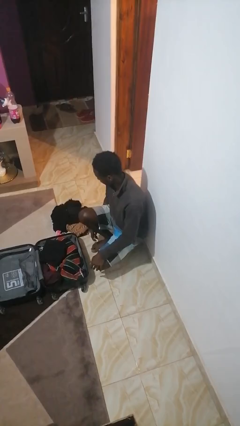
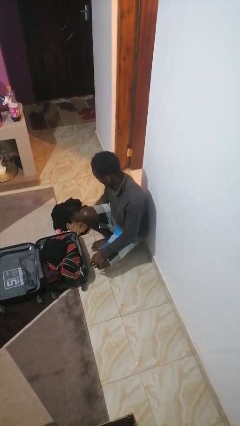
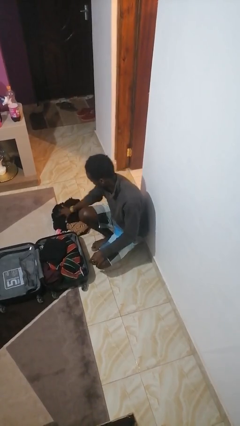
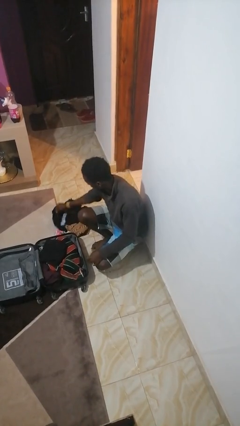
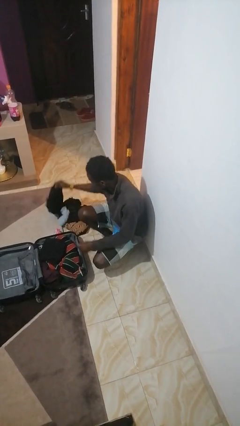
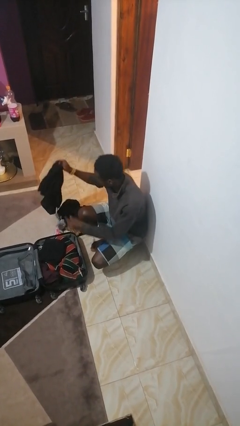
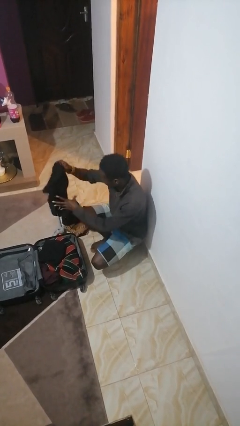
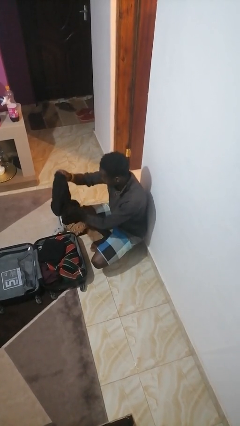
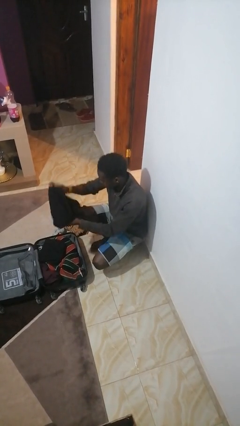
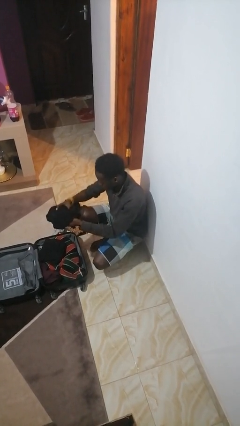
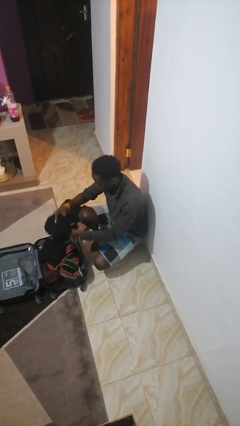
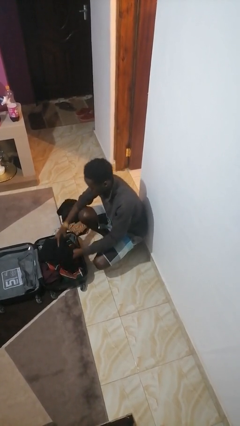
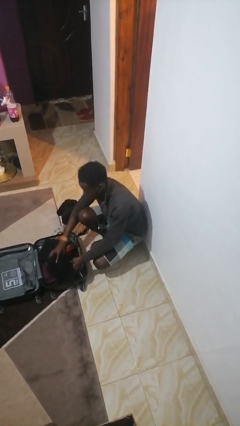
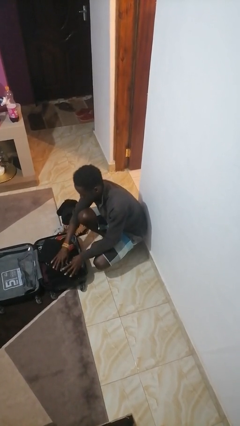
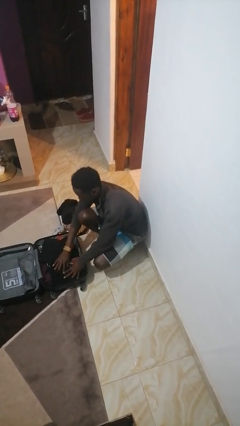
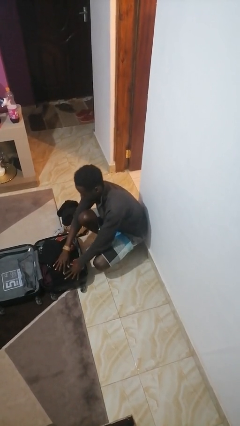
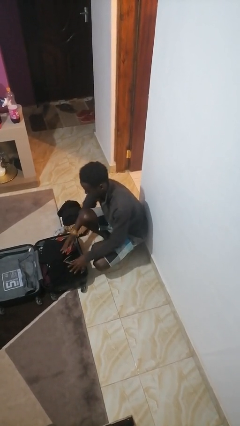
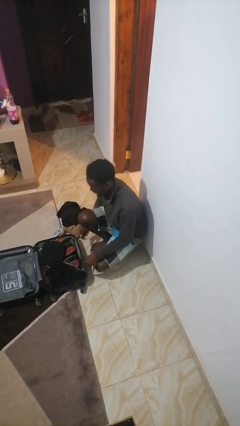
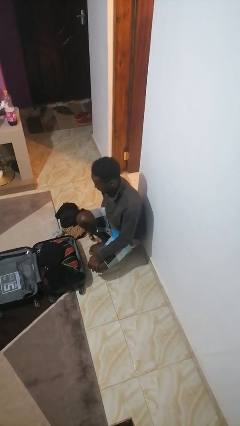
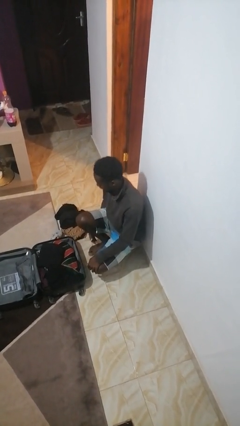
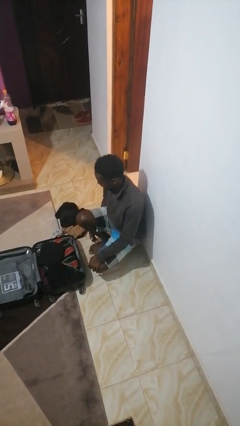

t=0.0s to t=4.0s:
person loads clothes into suitcase

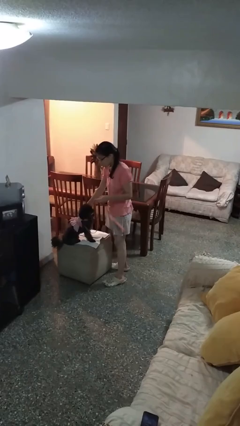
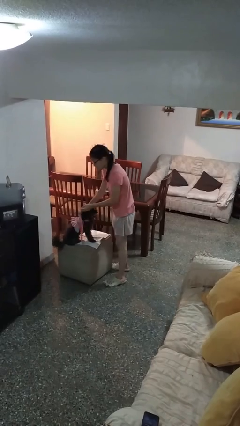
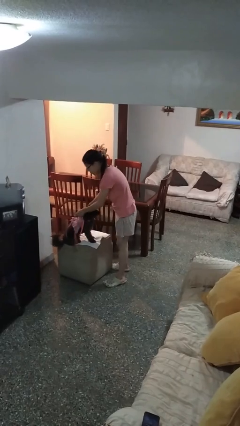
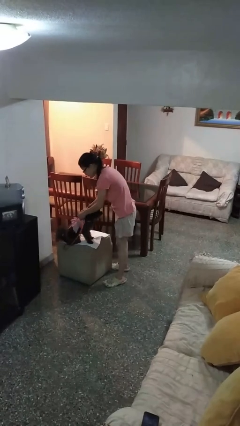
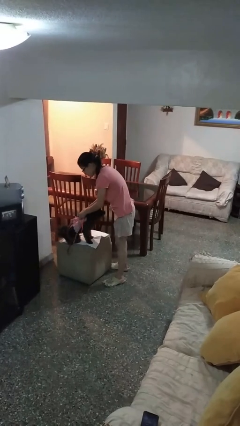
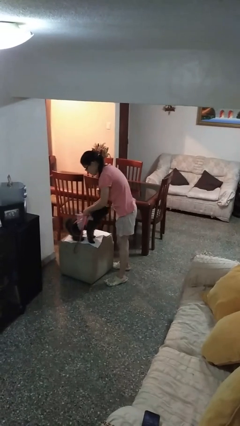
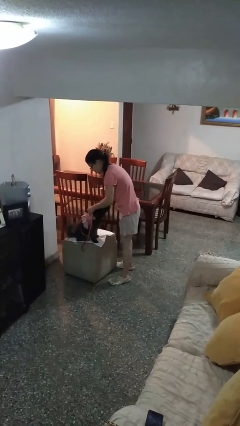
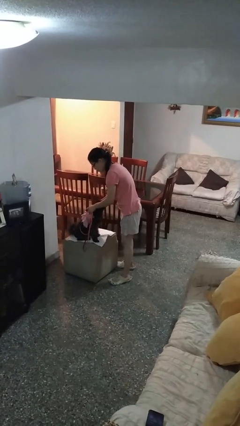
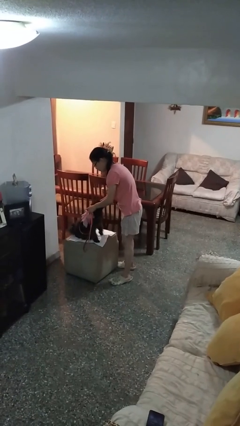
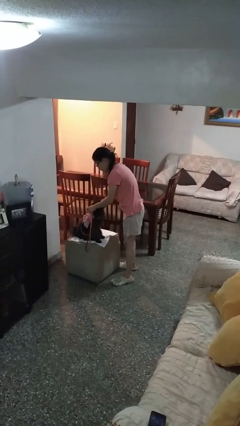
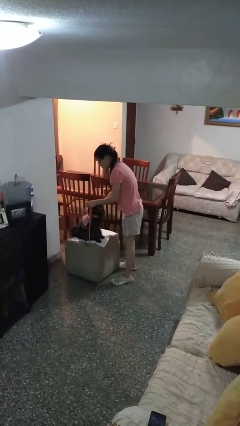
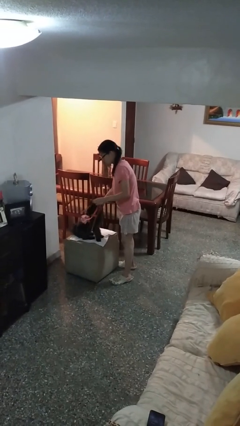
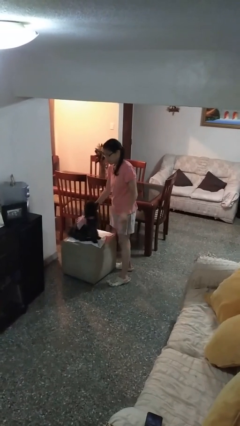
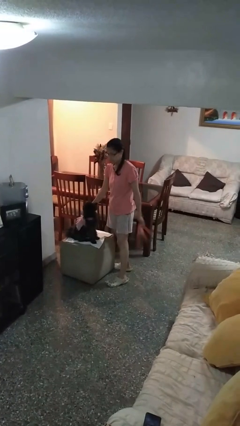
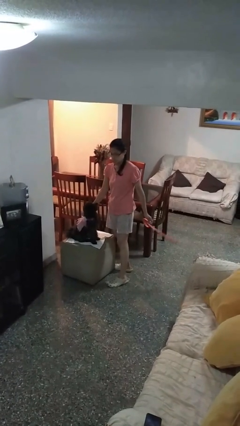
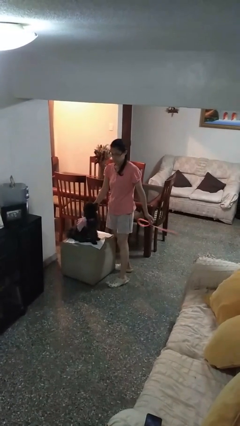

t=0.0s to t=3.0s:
person unattaches leash from dog

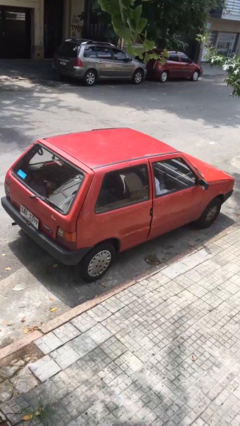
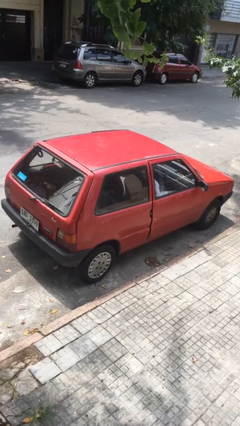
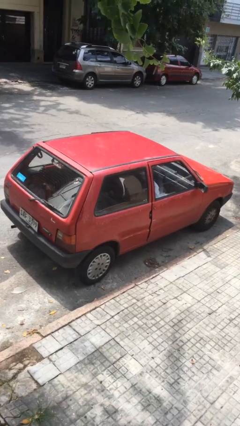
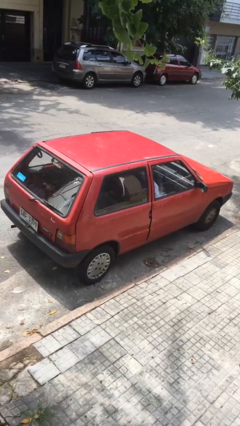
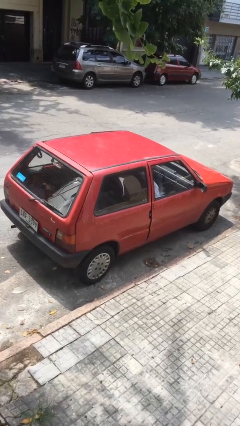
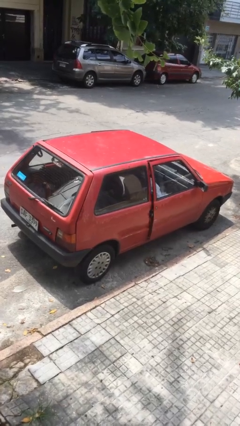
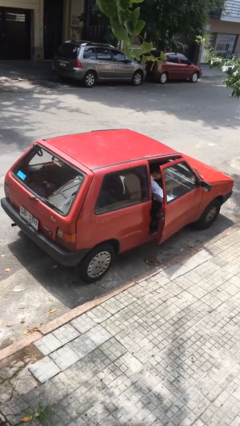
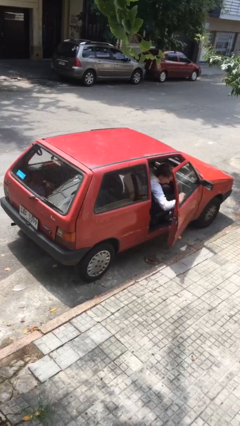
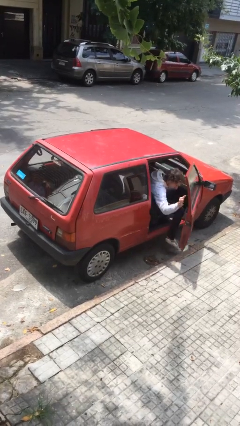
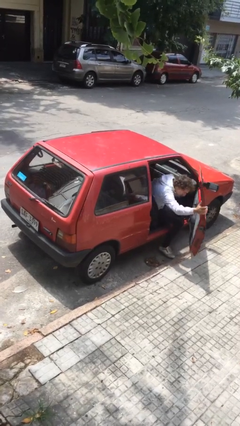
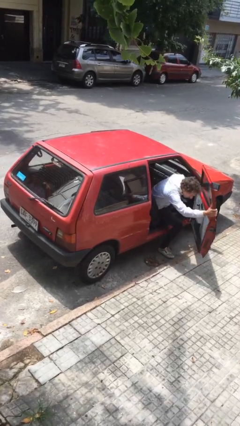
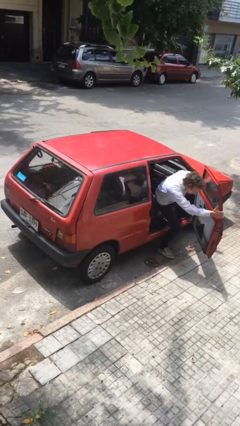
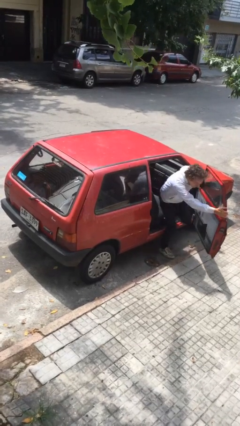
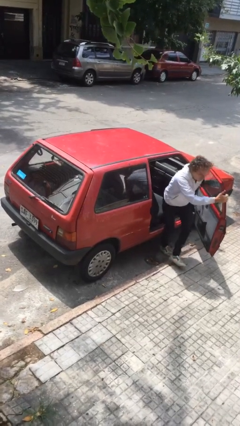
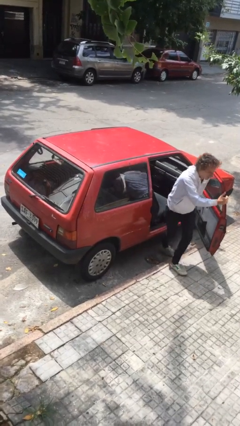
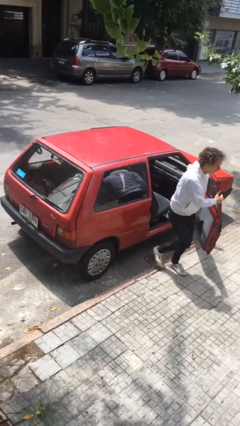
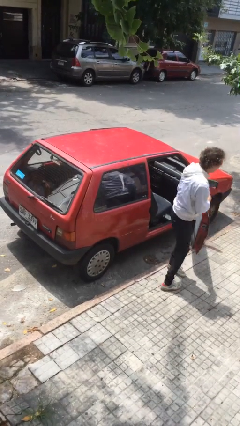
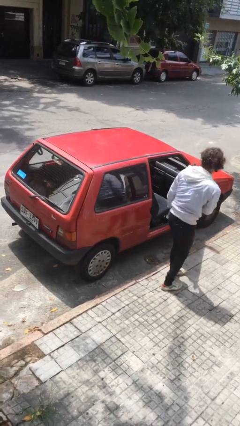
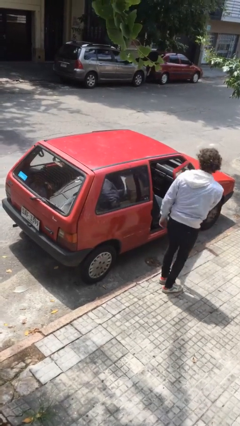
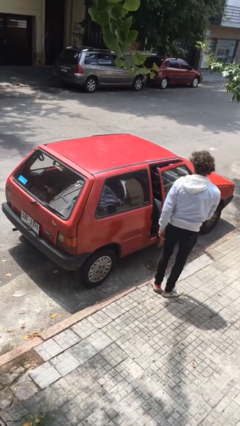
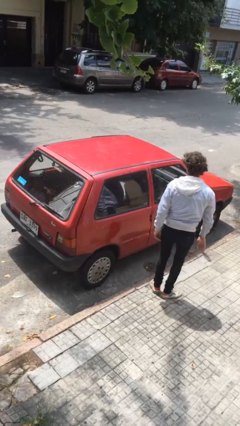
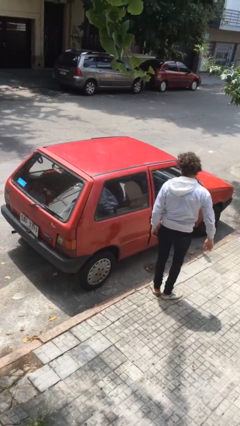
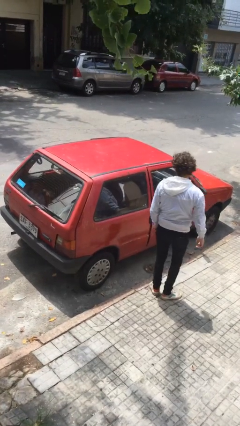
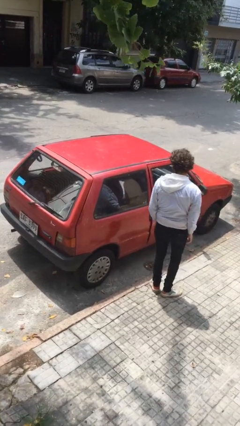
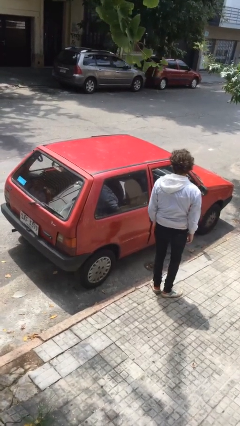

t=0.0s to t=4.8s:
car drops off person

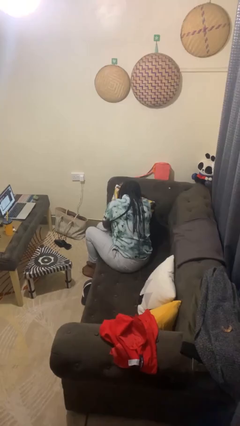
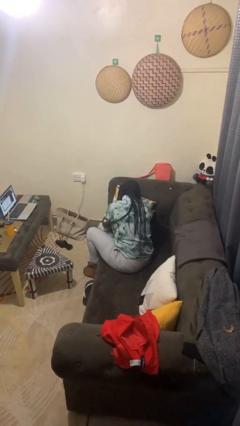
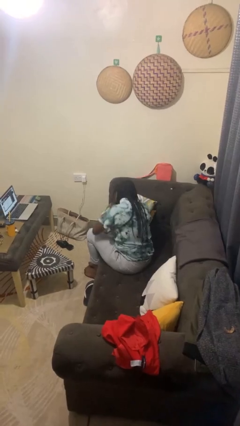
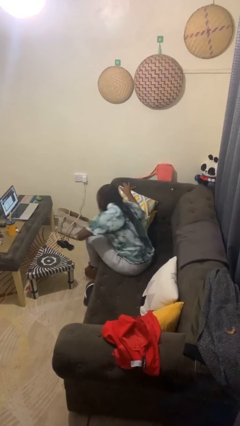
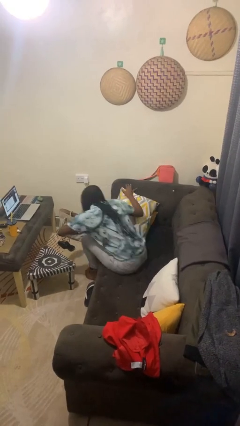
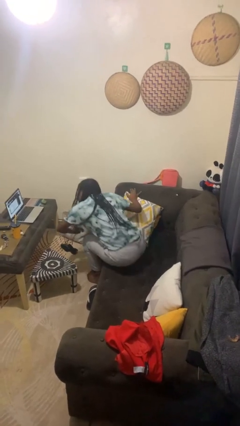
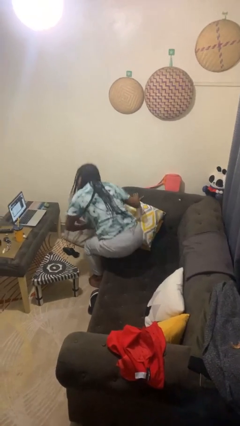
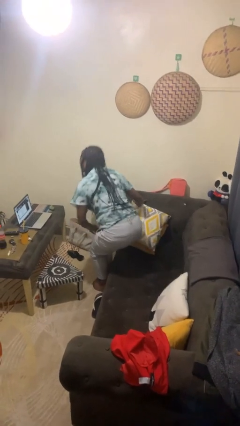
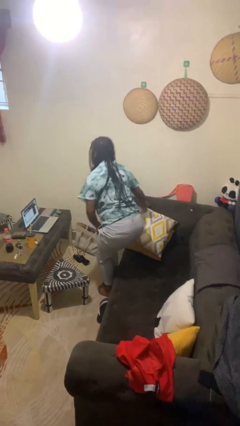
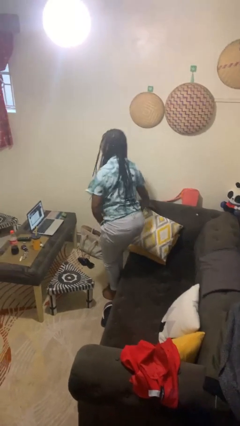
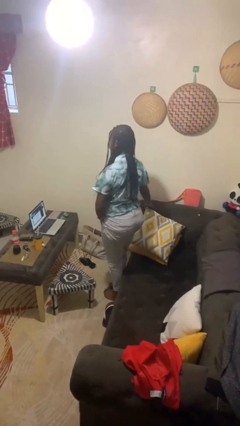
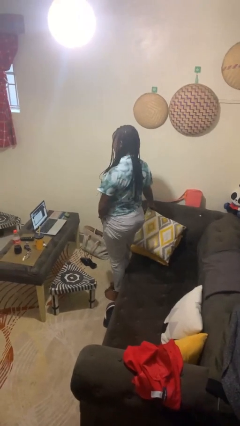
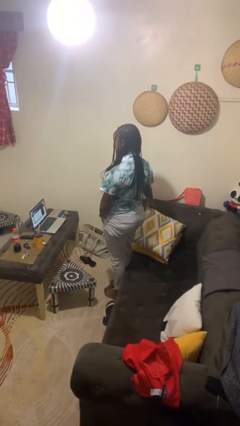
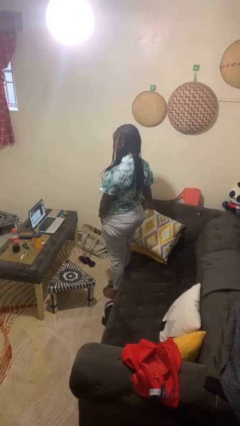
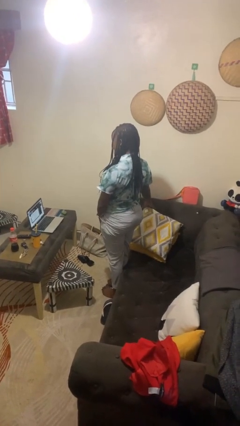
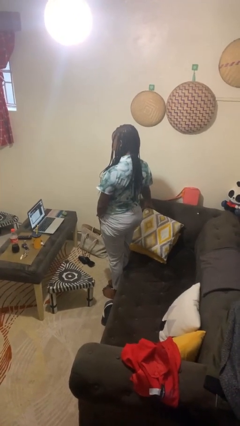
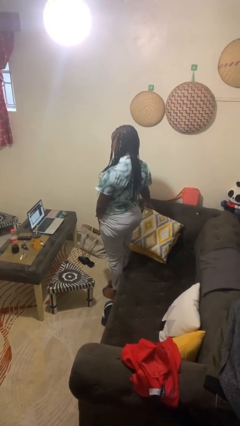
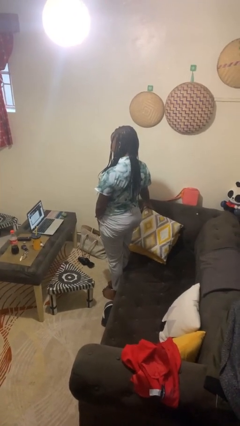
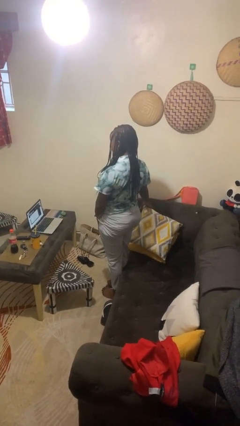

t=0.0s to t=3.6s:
person stands up

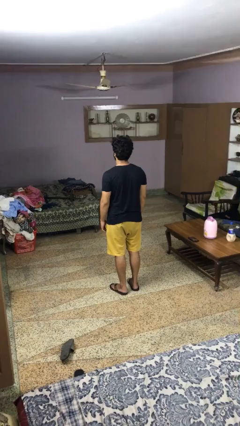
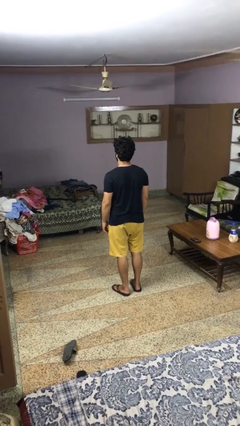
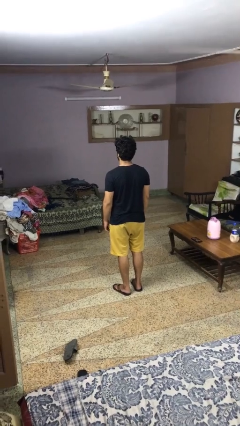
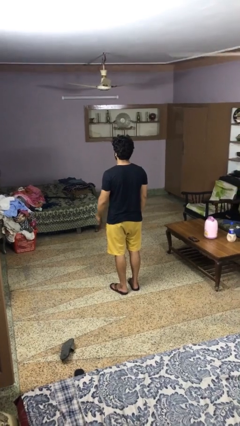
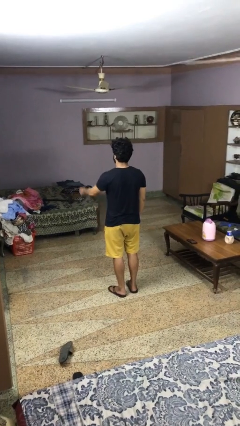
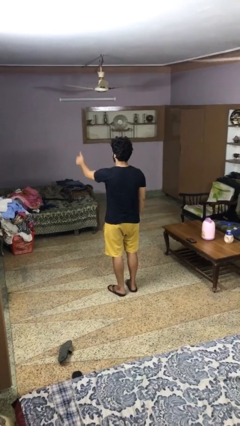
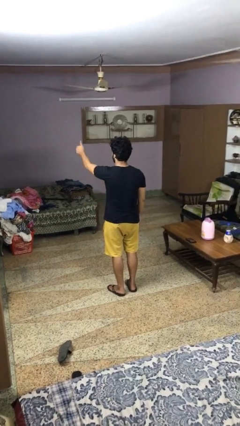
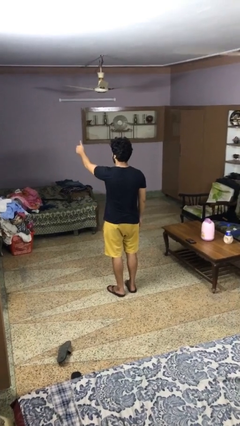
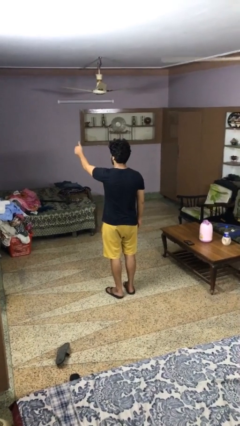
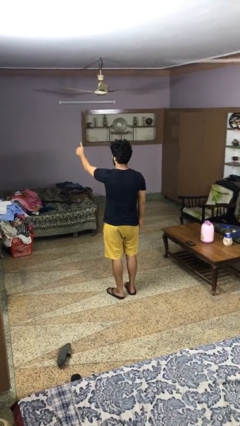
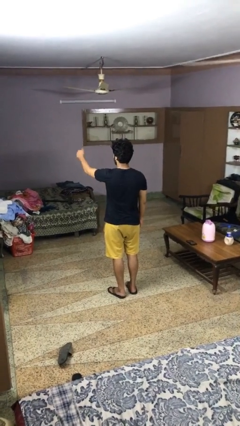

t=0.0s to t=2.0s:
person gestures thumbs up
